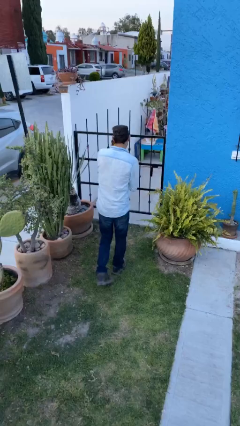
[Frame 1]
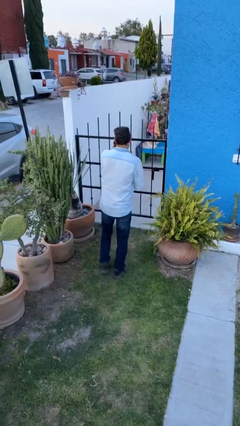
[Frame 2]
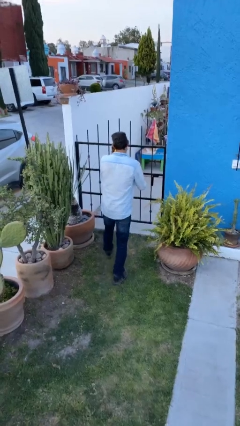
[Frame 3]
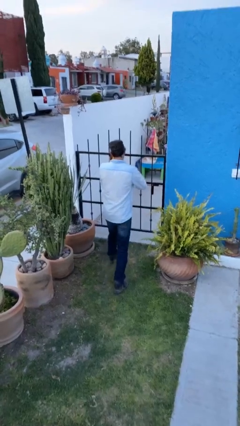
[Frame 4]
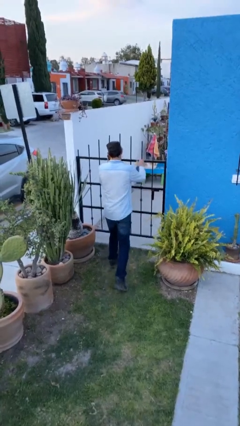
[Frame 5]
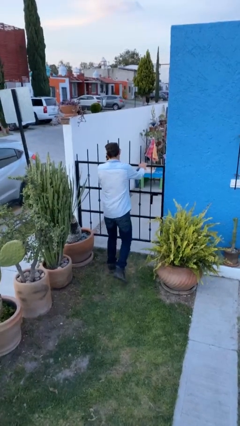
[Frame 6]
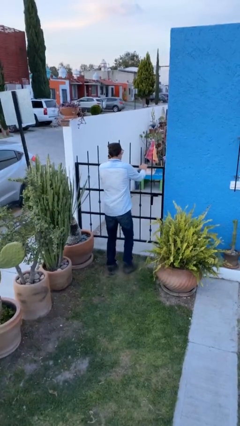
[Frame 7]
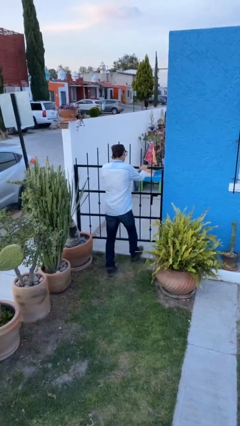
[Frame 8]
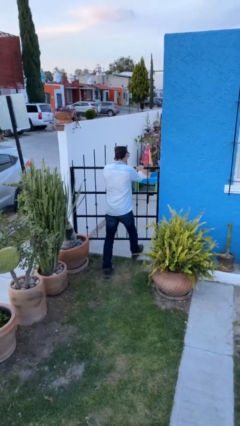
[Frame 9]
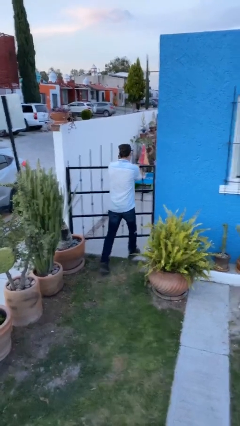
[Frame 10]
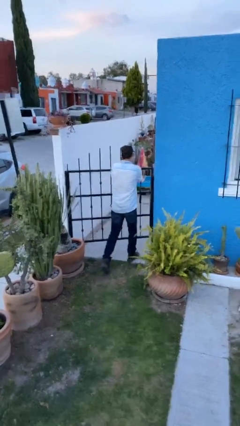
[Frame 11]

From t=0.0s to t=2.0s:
person opens facility door

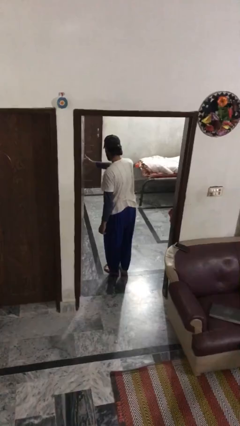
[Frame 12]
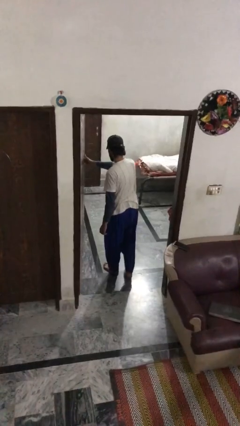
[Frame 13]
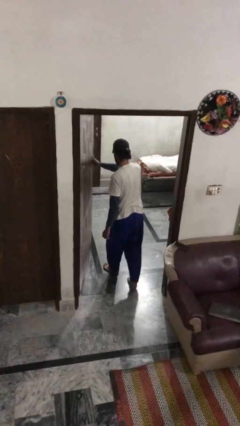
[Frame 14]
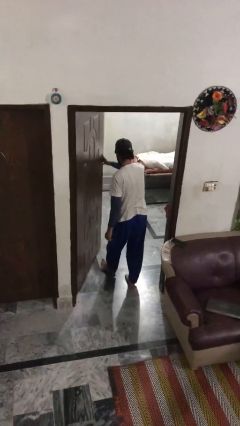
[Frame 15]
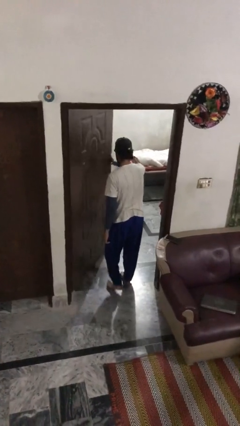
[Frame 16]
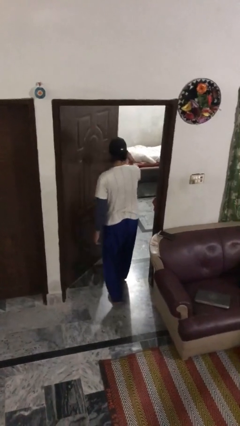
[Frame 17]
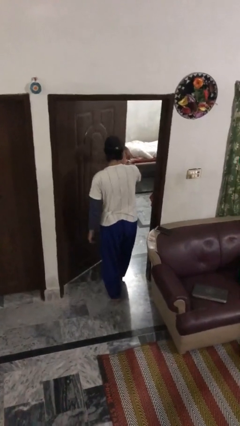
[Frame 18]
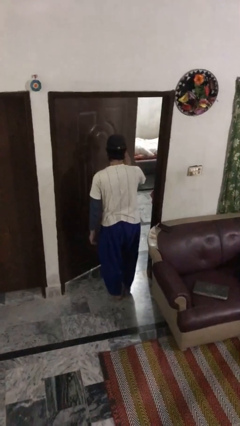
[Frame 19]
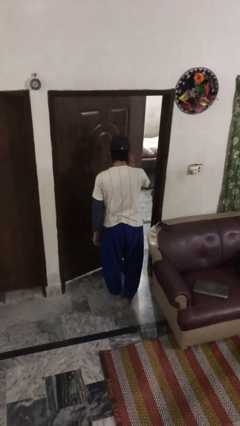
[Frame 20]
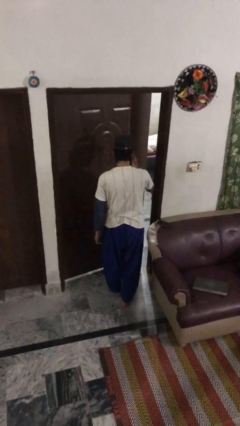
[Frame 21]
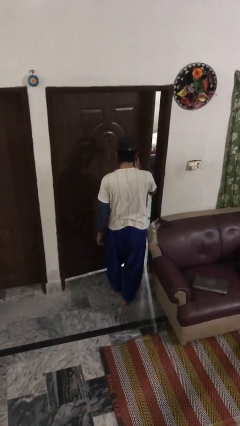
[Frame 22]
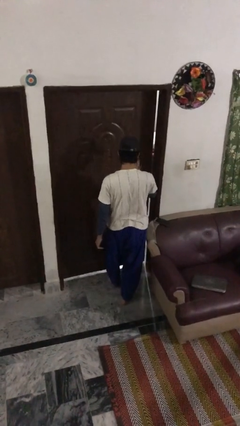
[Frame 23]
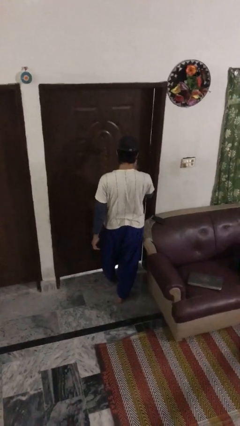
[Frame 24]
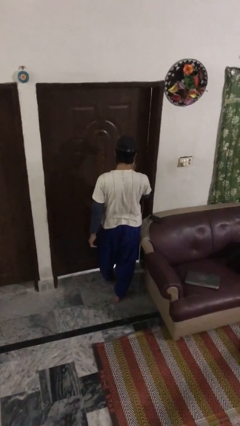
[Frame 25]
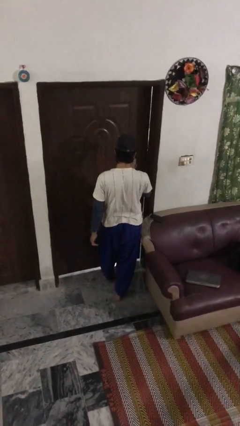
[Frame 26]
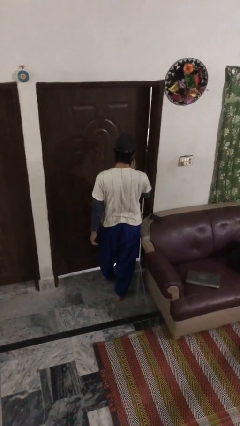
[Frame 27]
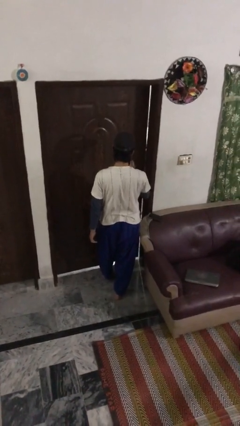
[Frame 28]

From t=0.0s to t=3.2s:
person closes facility door

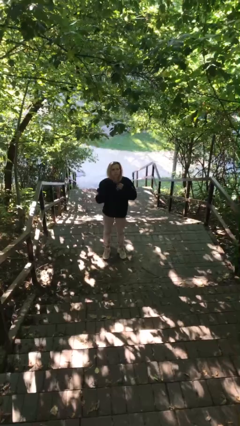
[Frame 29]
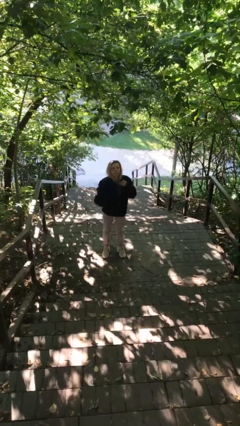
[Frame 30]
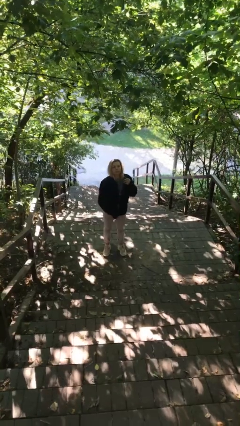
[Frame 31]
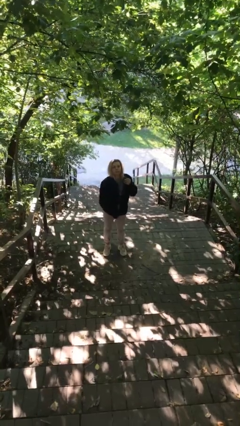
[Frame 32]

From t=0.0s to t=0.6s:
person unzips jacket

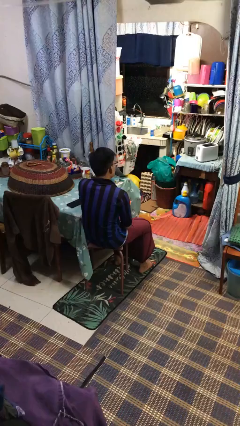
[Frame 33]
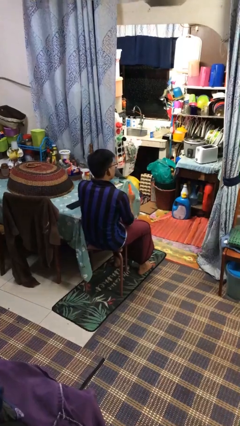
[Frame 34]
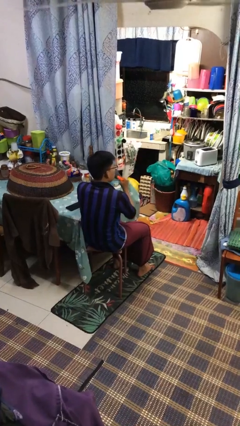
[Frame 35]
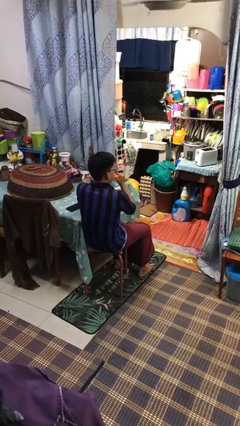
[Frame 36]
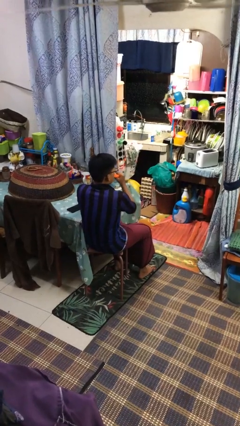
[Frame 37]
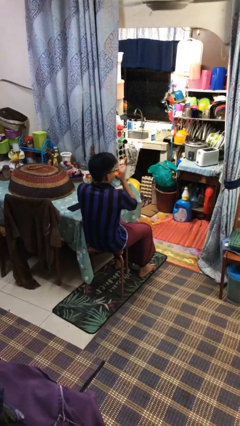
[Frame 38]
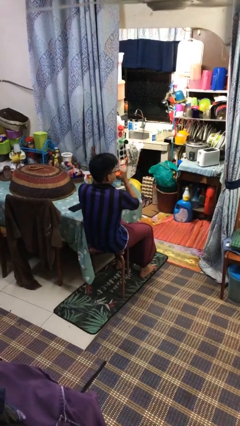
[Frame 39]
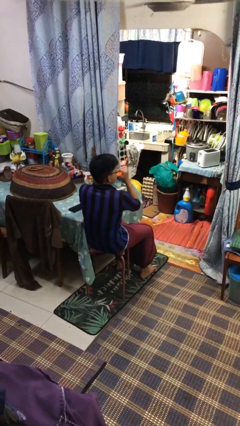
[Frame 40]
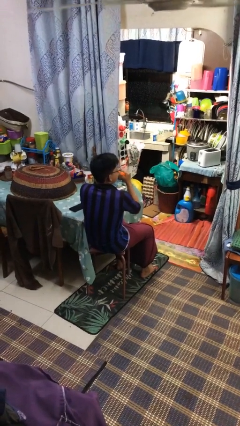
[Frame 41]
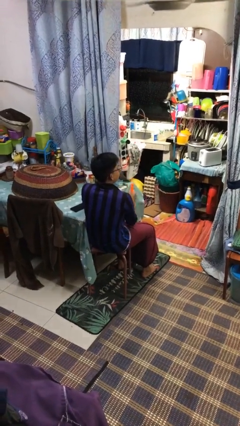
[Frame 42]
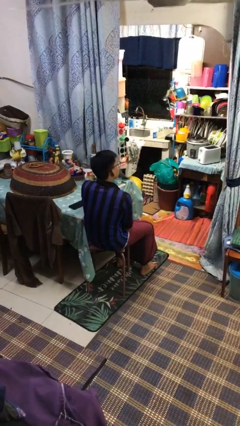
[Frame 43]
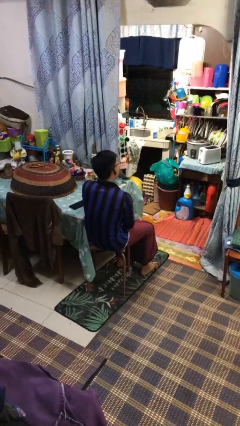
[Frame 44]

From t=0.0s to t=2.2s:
person vapes

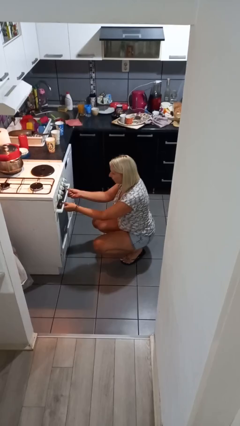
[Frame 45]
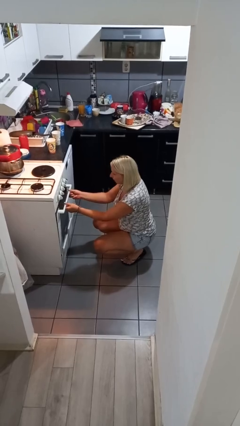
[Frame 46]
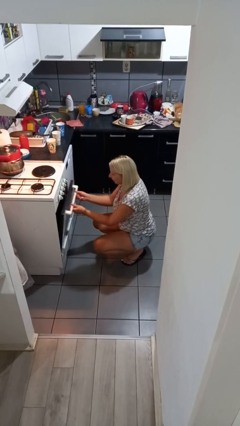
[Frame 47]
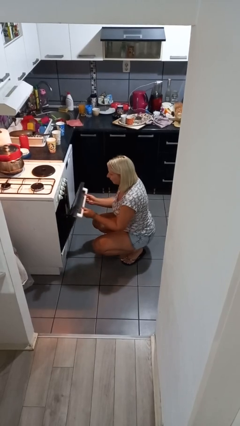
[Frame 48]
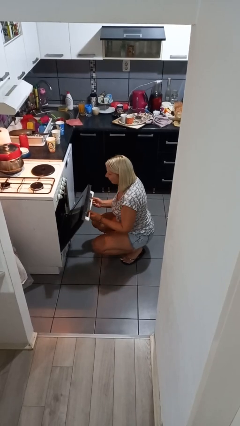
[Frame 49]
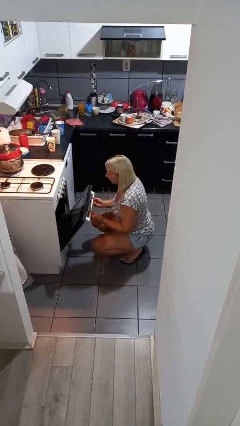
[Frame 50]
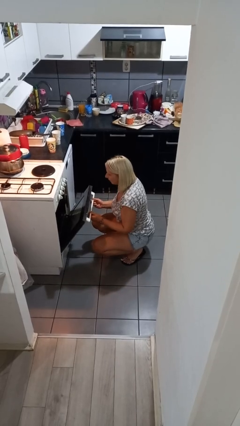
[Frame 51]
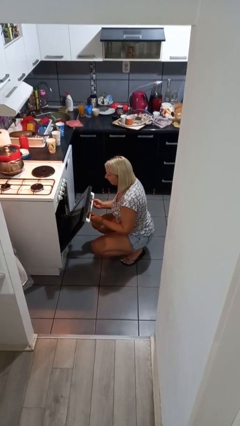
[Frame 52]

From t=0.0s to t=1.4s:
person opens oven door

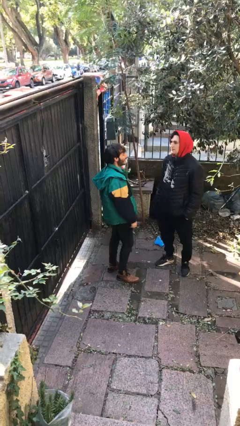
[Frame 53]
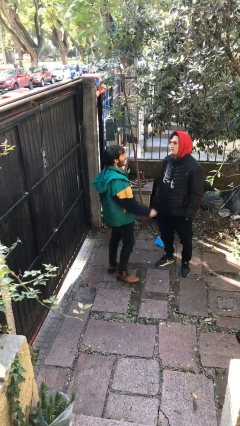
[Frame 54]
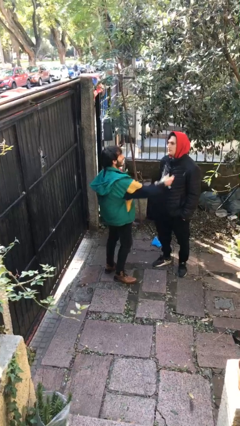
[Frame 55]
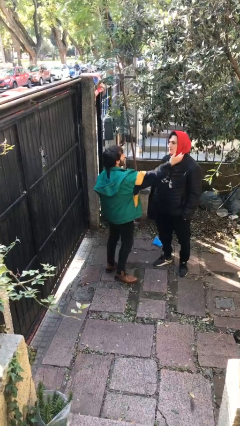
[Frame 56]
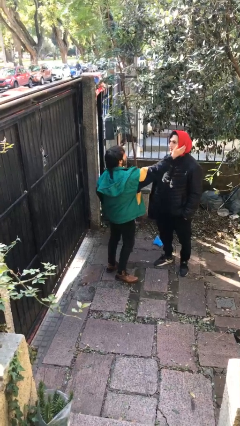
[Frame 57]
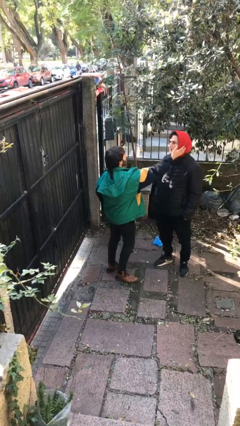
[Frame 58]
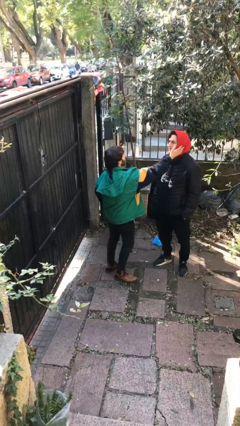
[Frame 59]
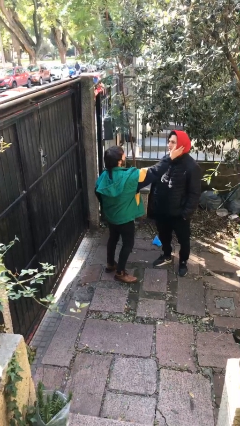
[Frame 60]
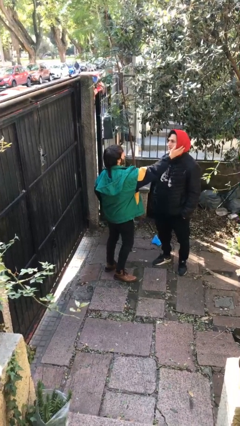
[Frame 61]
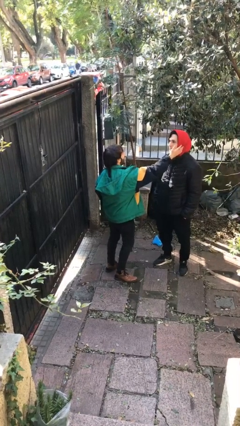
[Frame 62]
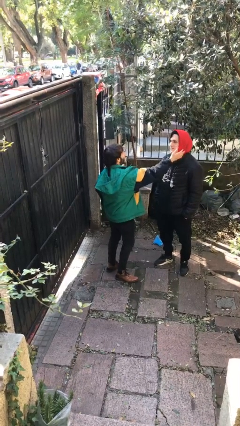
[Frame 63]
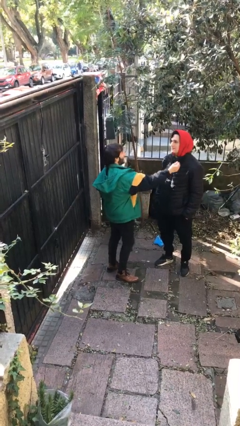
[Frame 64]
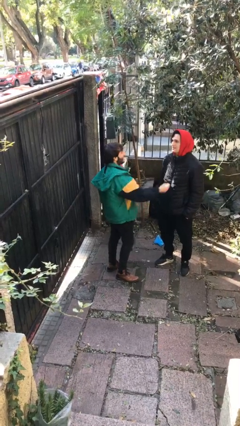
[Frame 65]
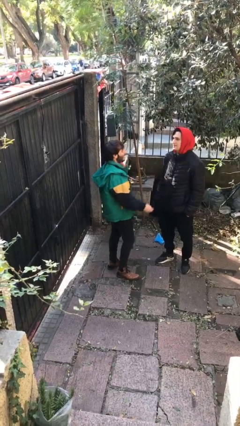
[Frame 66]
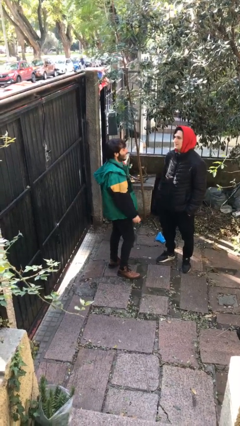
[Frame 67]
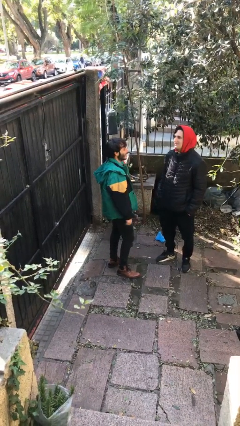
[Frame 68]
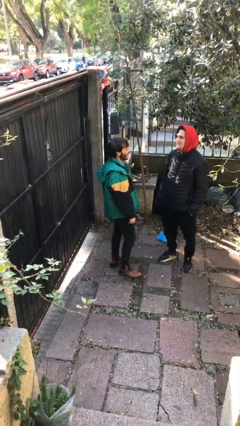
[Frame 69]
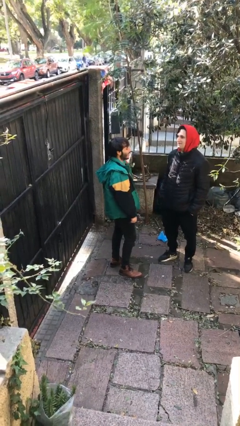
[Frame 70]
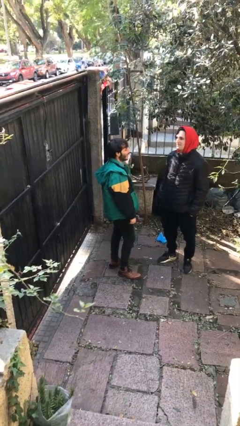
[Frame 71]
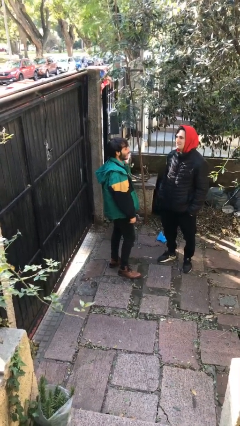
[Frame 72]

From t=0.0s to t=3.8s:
person touches face of person

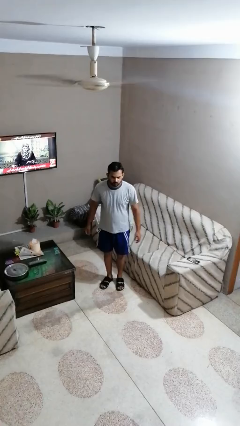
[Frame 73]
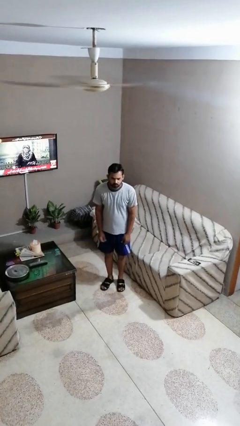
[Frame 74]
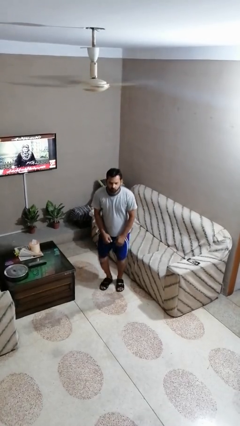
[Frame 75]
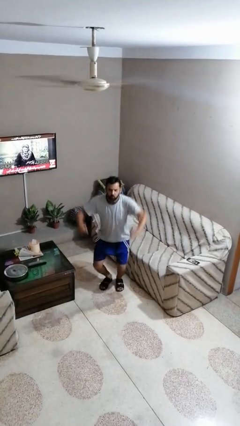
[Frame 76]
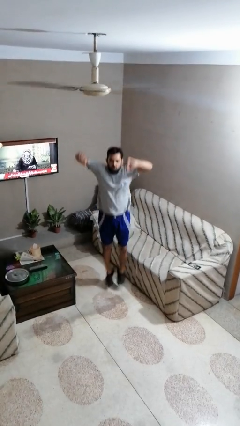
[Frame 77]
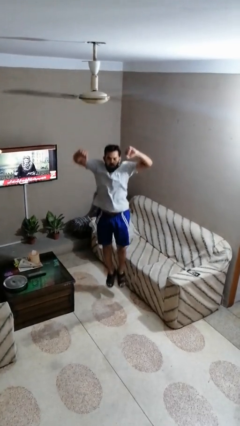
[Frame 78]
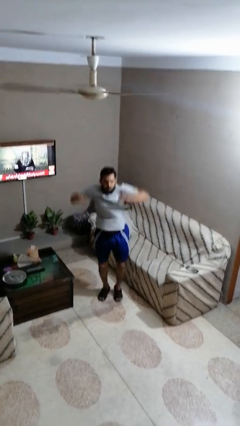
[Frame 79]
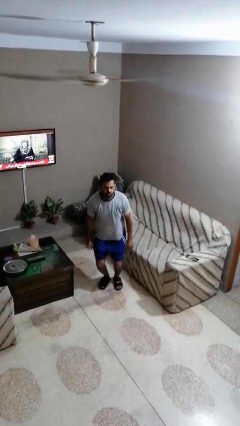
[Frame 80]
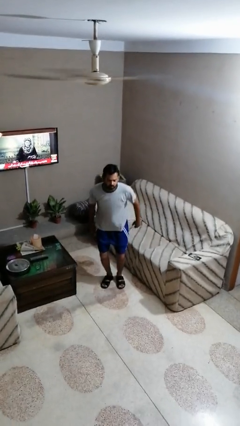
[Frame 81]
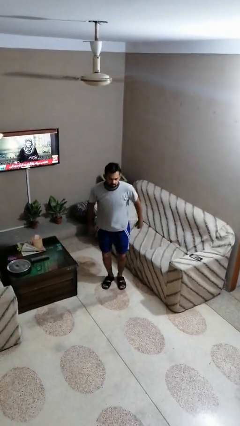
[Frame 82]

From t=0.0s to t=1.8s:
person jumps

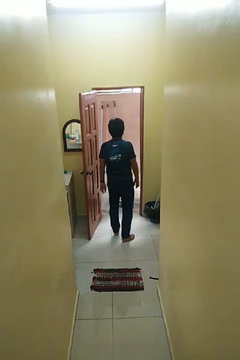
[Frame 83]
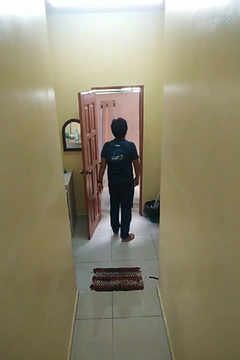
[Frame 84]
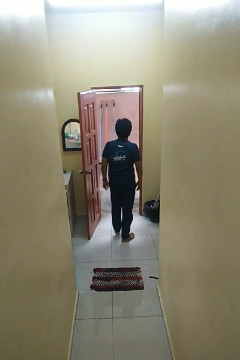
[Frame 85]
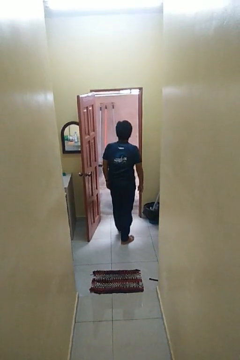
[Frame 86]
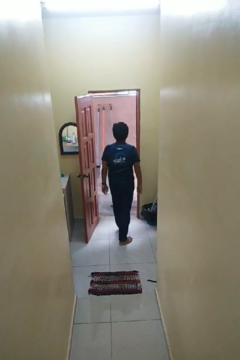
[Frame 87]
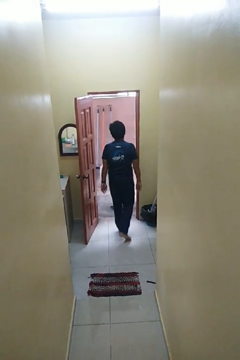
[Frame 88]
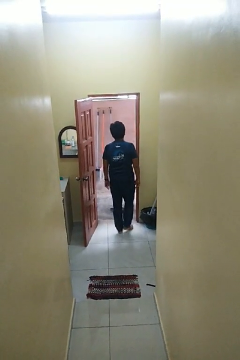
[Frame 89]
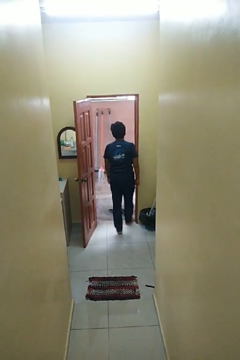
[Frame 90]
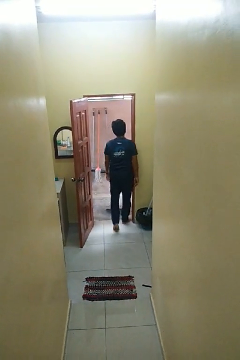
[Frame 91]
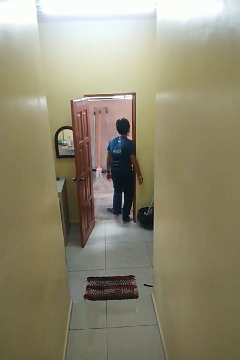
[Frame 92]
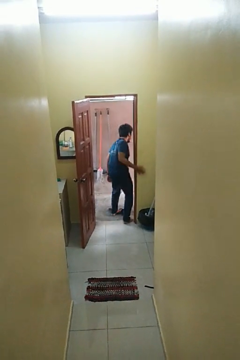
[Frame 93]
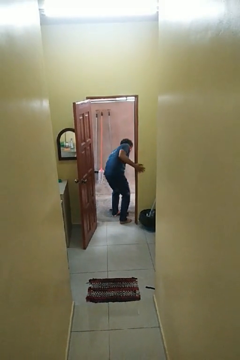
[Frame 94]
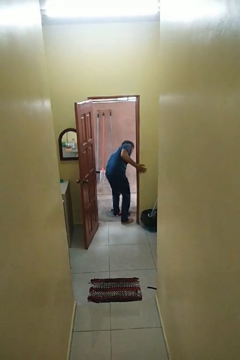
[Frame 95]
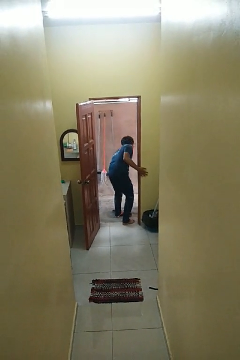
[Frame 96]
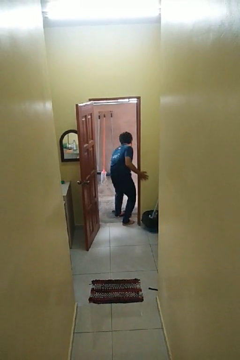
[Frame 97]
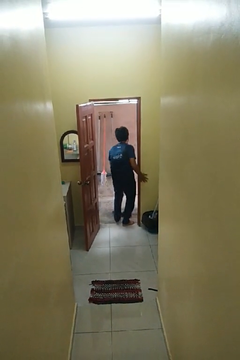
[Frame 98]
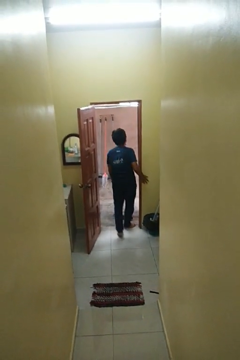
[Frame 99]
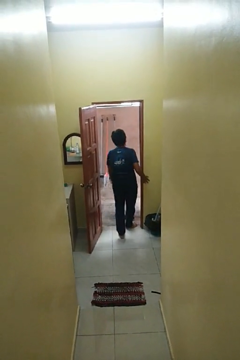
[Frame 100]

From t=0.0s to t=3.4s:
person bumps into wall
